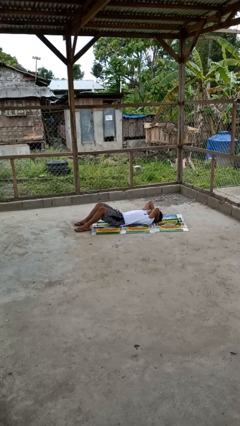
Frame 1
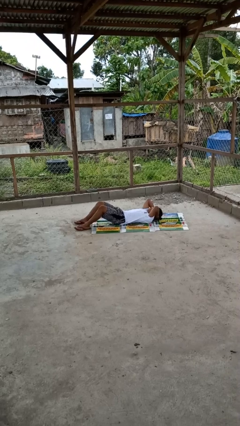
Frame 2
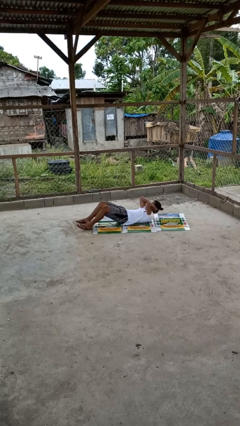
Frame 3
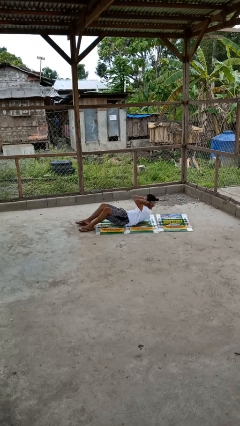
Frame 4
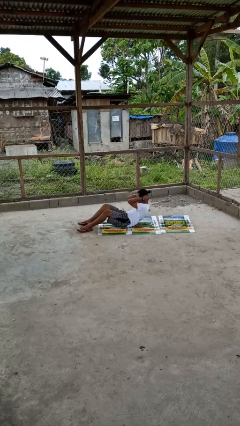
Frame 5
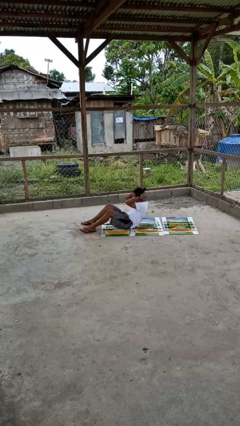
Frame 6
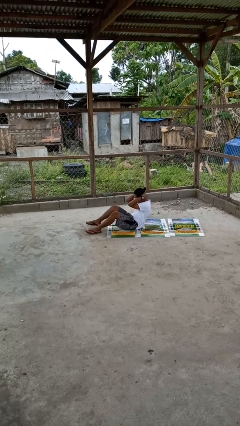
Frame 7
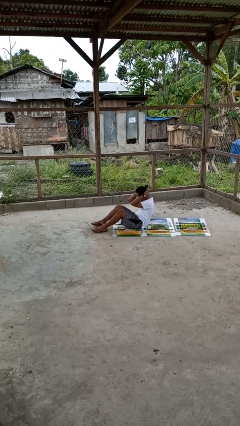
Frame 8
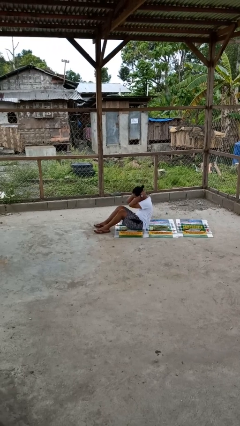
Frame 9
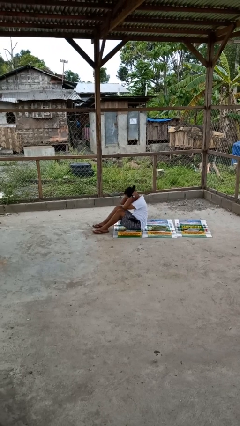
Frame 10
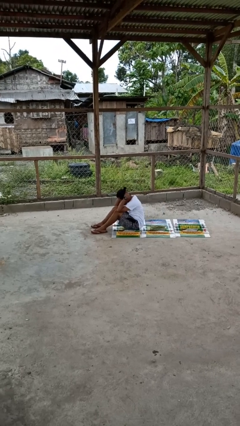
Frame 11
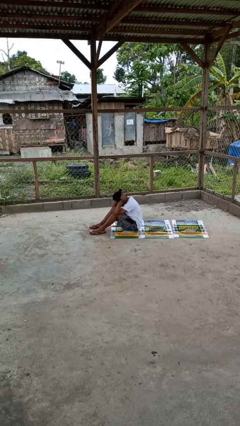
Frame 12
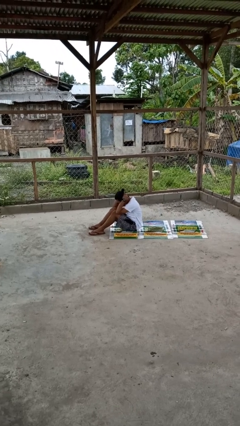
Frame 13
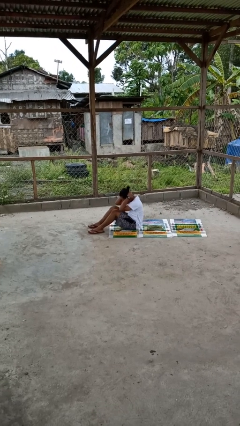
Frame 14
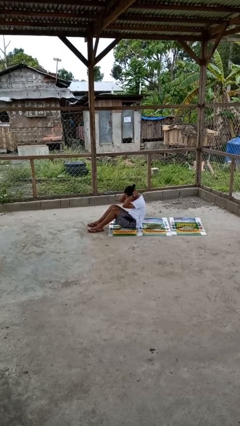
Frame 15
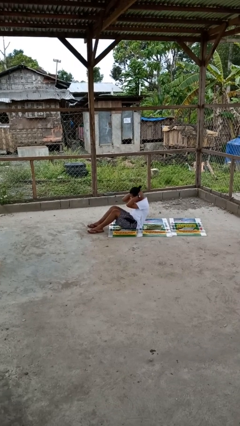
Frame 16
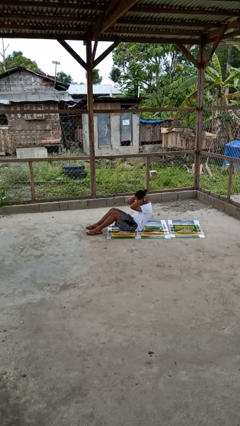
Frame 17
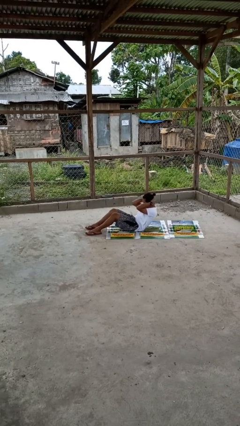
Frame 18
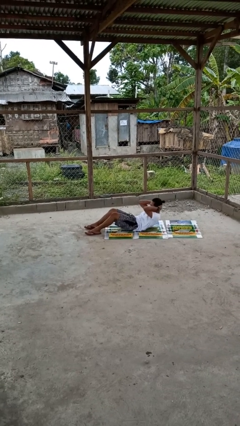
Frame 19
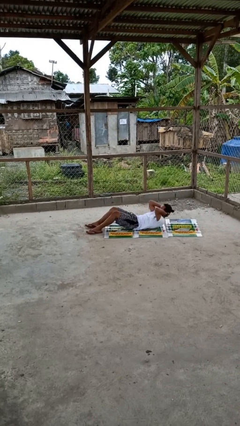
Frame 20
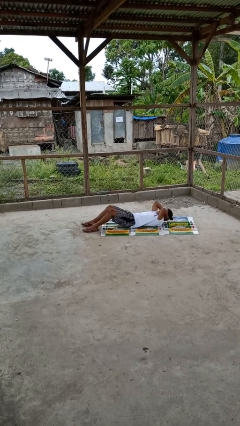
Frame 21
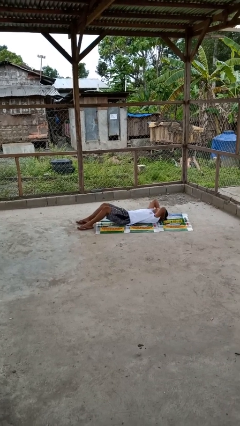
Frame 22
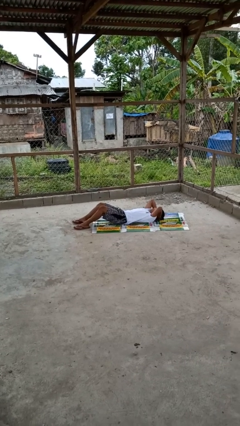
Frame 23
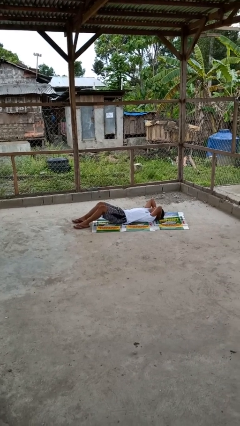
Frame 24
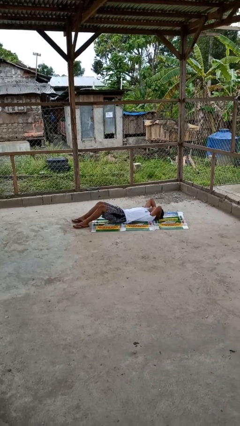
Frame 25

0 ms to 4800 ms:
person exercises with situp

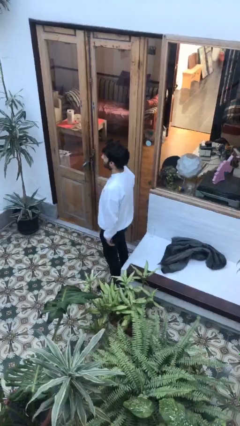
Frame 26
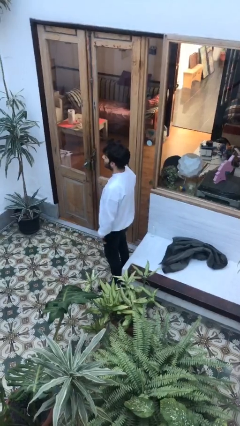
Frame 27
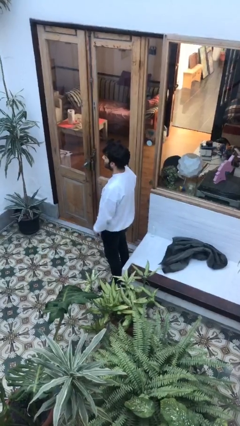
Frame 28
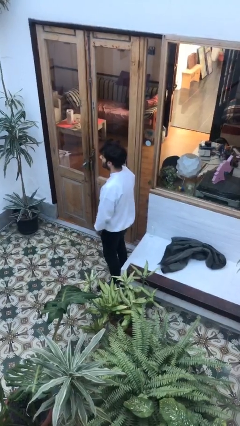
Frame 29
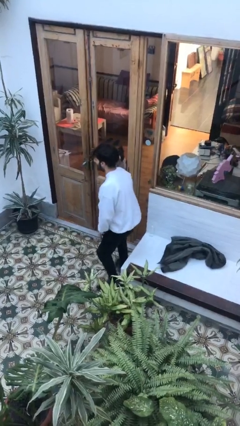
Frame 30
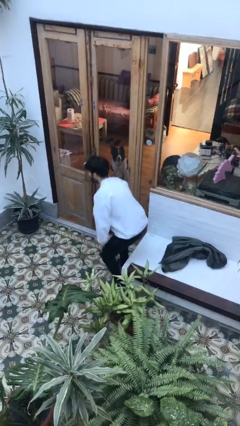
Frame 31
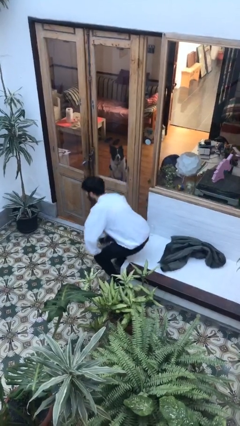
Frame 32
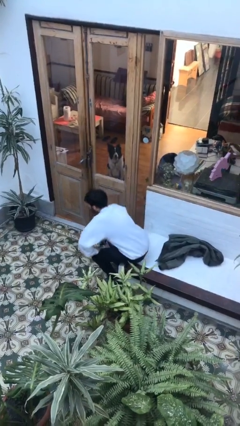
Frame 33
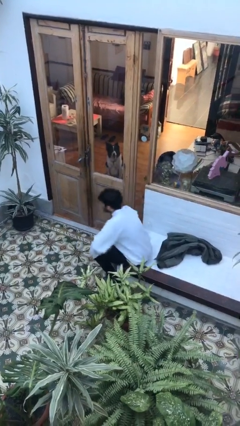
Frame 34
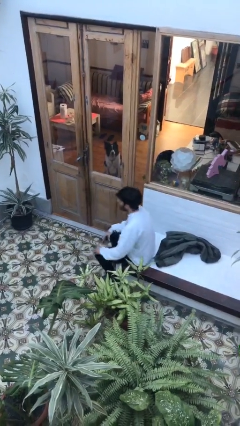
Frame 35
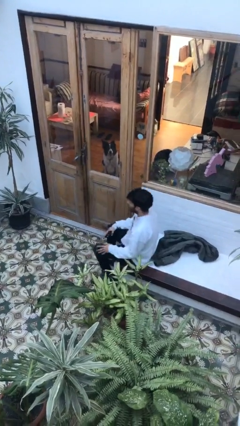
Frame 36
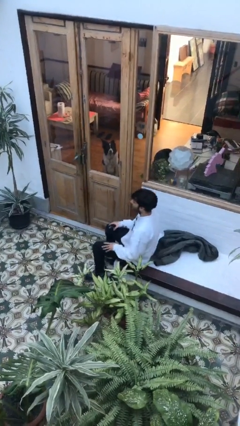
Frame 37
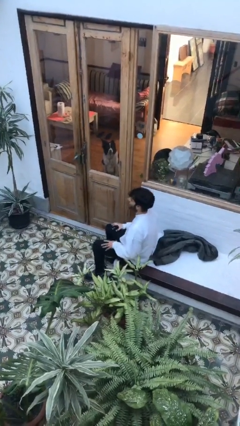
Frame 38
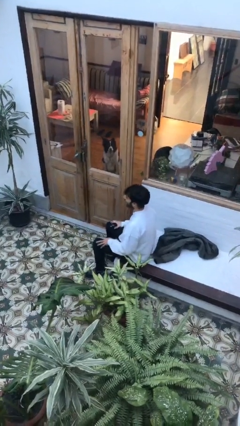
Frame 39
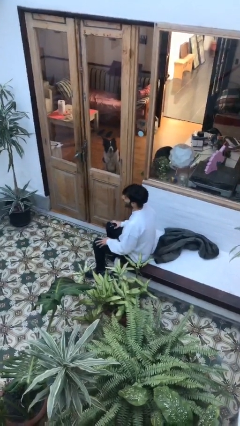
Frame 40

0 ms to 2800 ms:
person sits down

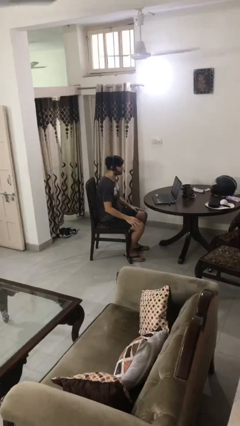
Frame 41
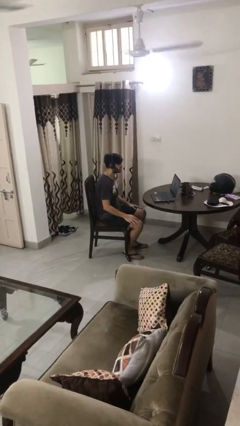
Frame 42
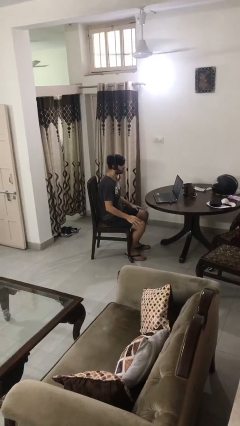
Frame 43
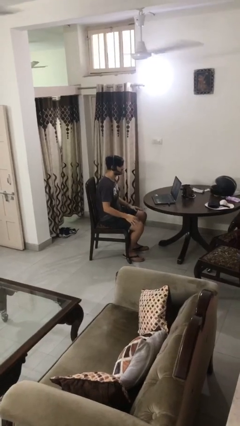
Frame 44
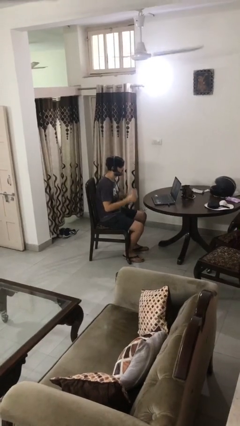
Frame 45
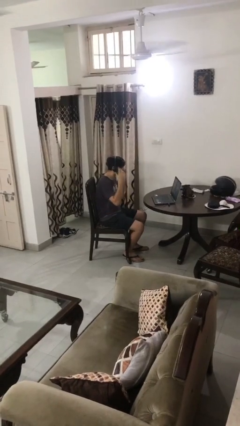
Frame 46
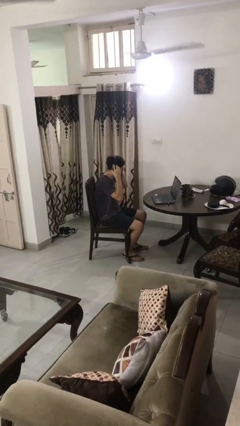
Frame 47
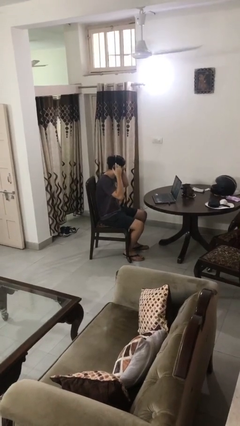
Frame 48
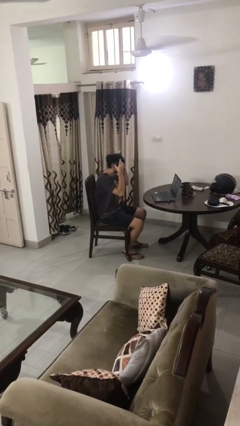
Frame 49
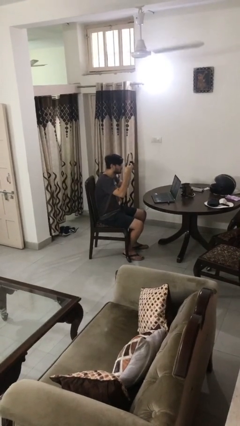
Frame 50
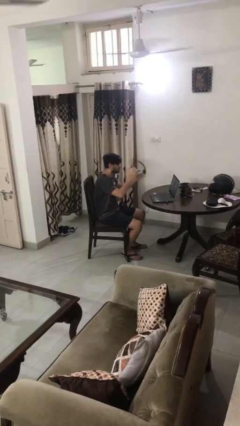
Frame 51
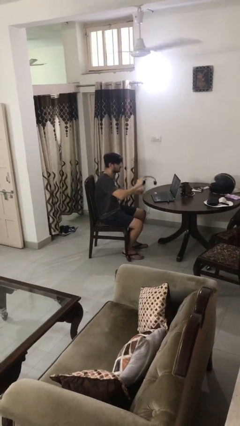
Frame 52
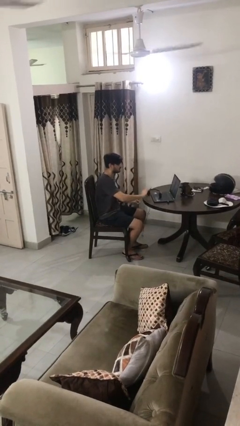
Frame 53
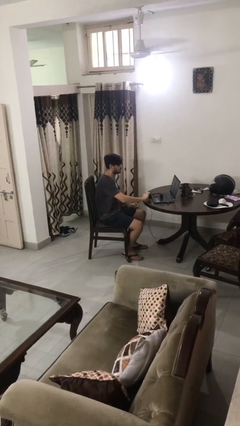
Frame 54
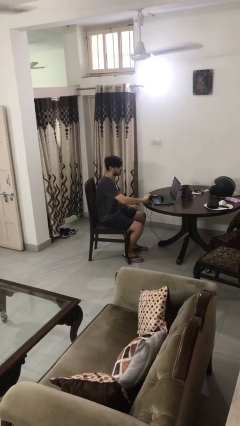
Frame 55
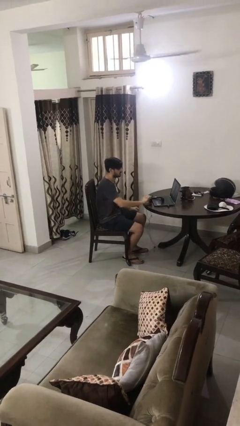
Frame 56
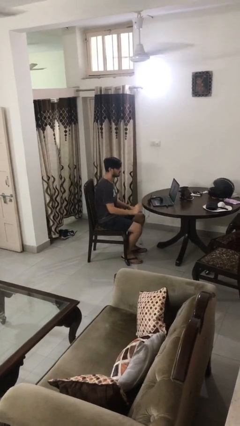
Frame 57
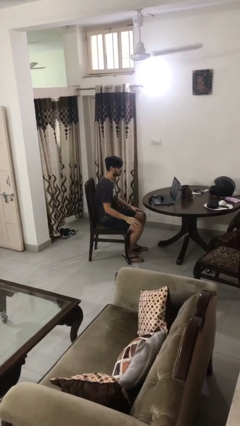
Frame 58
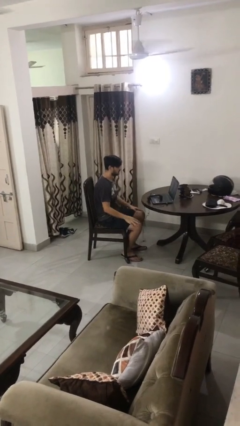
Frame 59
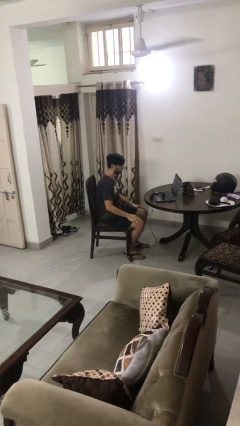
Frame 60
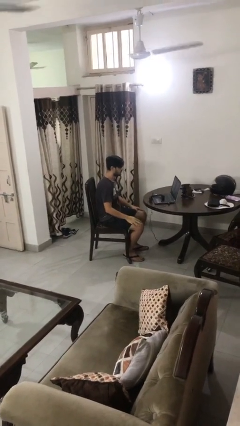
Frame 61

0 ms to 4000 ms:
person takes off headphones

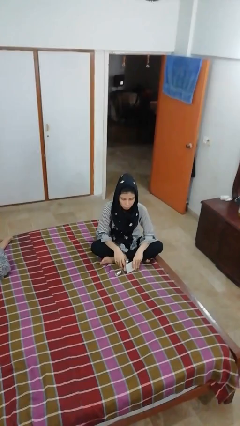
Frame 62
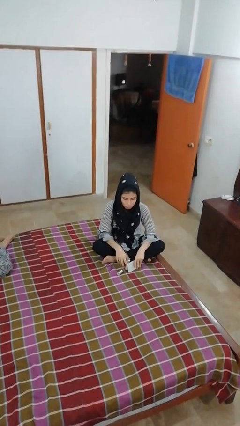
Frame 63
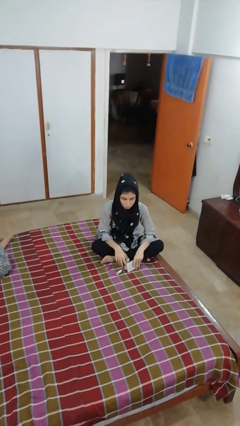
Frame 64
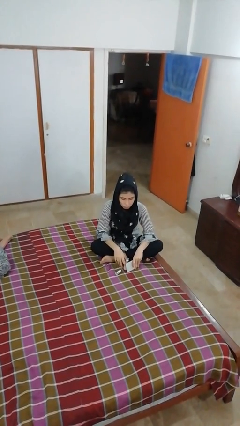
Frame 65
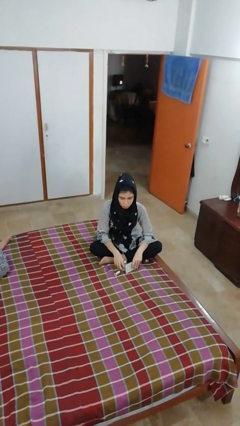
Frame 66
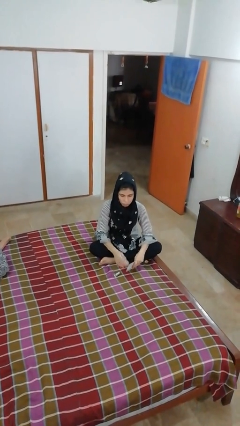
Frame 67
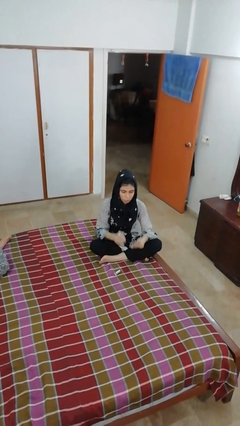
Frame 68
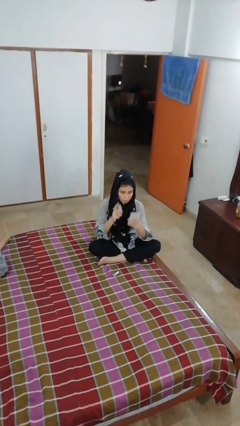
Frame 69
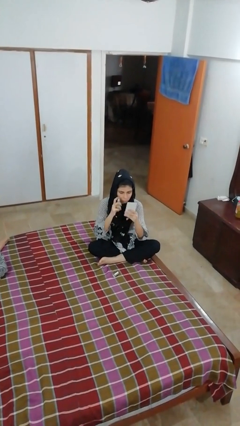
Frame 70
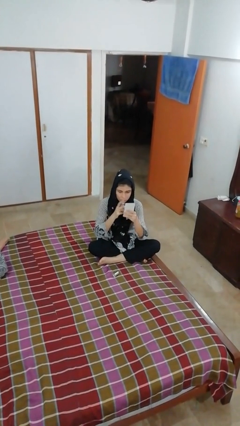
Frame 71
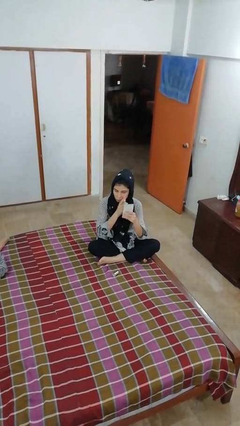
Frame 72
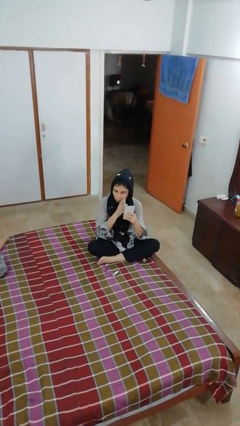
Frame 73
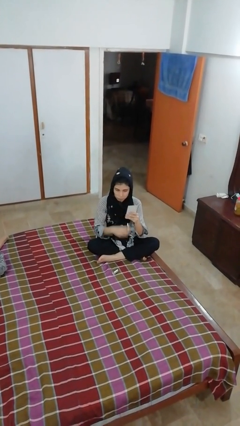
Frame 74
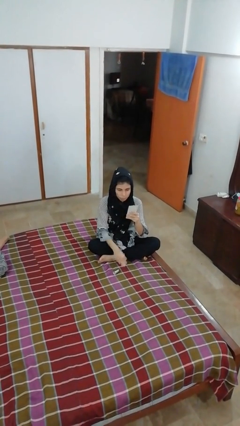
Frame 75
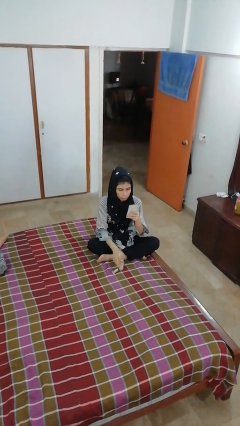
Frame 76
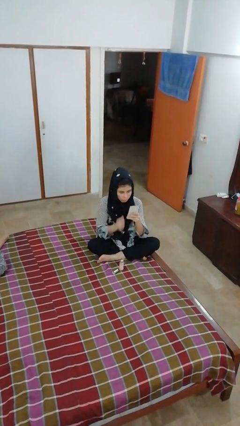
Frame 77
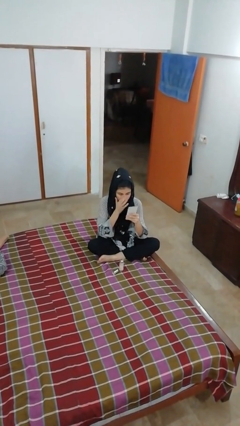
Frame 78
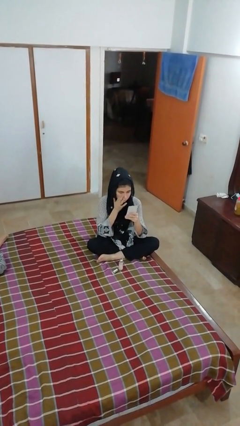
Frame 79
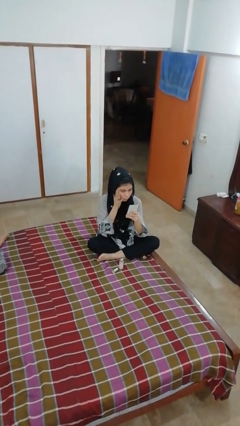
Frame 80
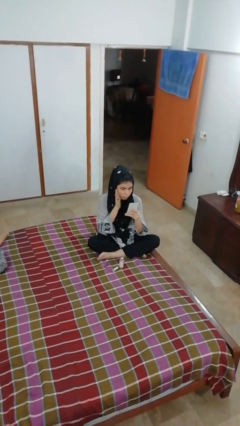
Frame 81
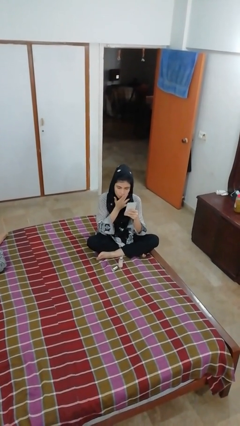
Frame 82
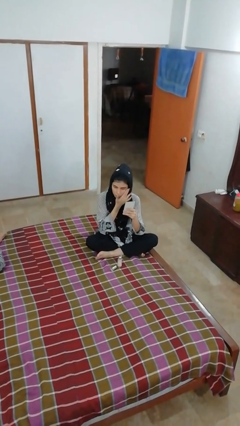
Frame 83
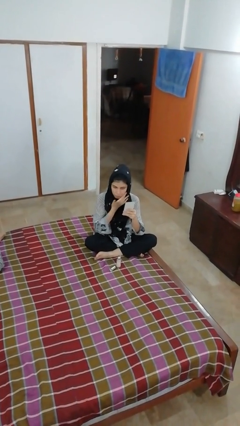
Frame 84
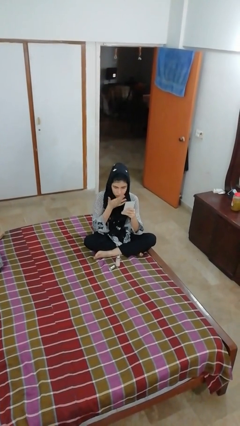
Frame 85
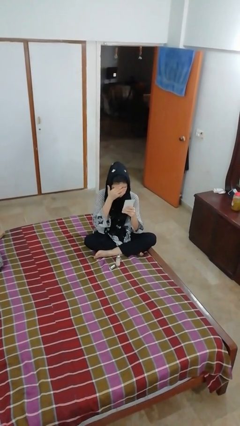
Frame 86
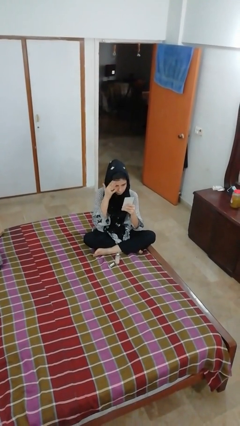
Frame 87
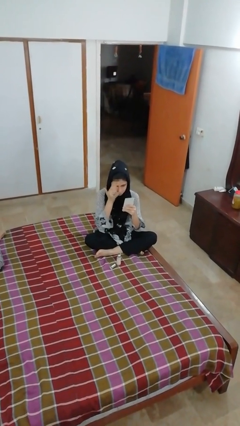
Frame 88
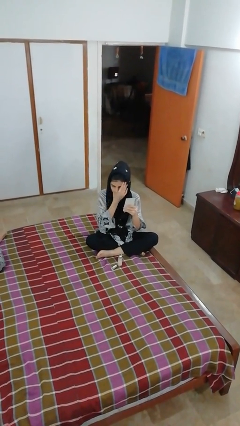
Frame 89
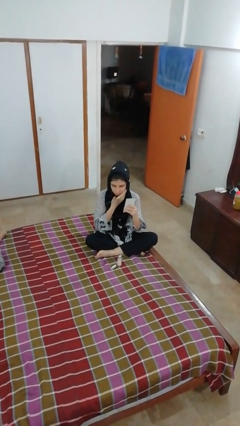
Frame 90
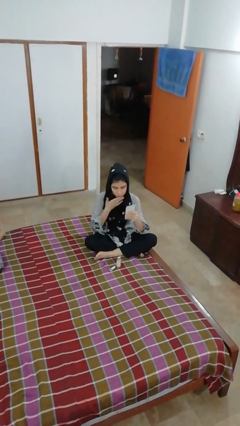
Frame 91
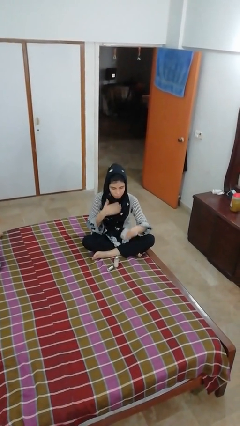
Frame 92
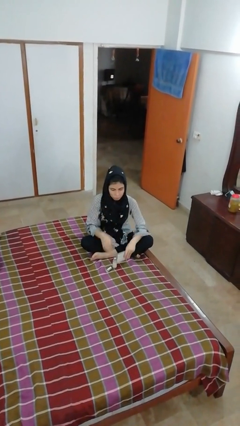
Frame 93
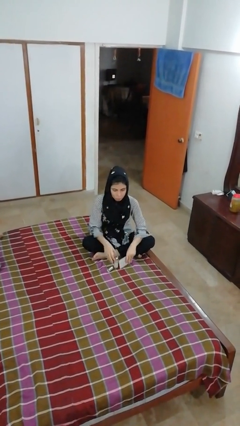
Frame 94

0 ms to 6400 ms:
person applies foundation makeup
